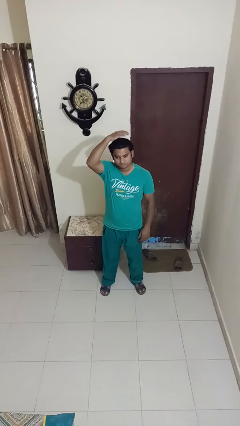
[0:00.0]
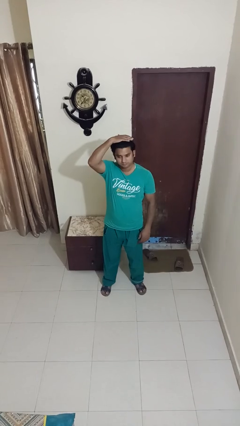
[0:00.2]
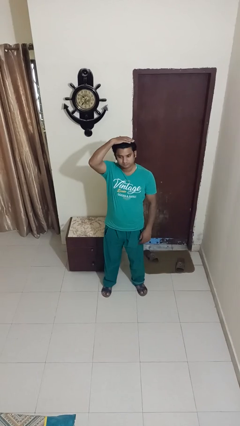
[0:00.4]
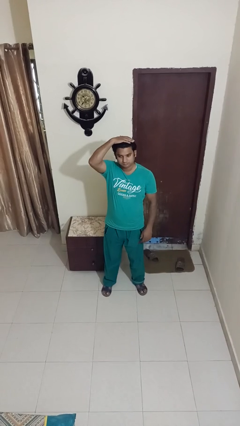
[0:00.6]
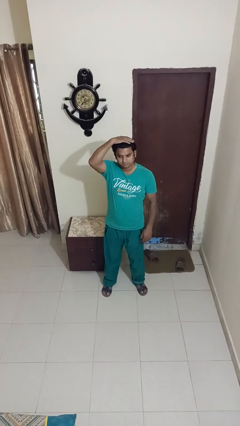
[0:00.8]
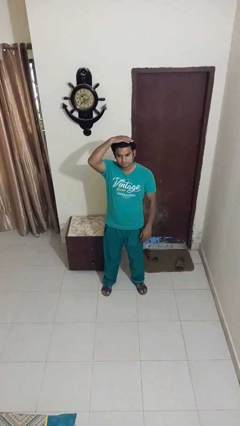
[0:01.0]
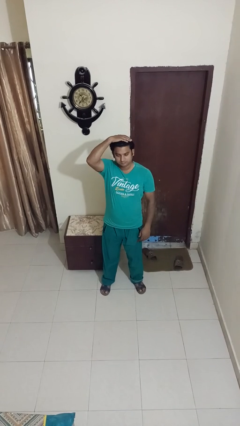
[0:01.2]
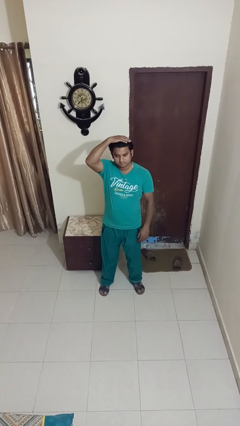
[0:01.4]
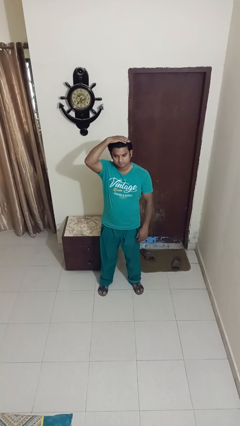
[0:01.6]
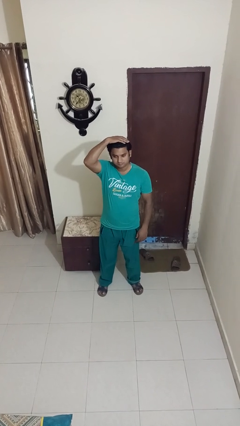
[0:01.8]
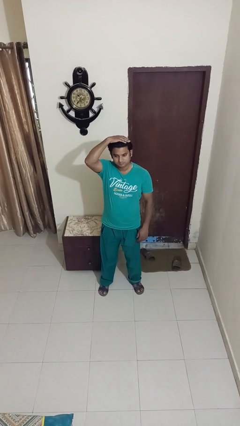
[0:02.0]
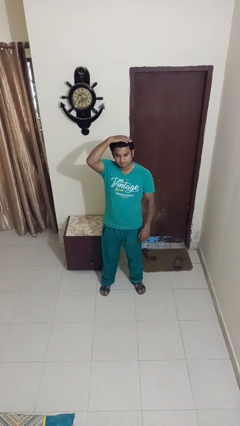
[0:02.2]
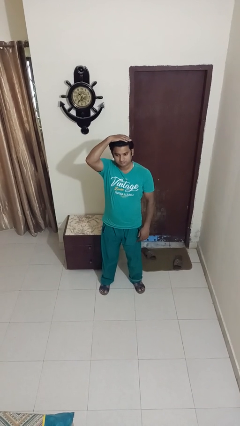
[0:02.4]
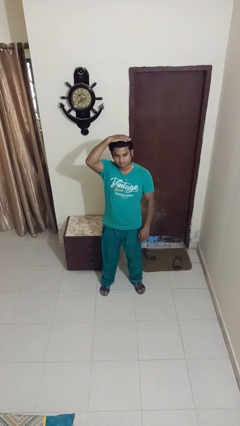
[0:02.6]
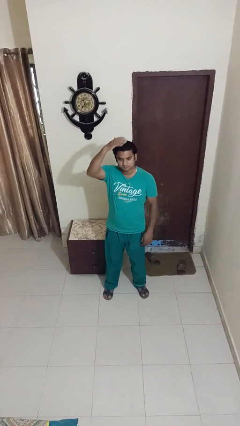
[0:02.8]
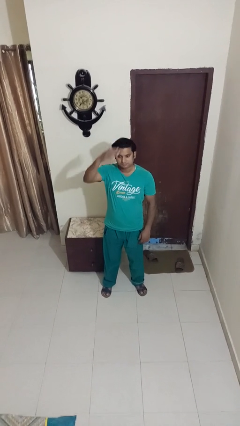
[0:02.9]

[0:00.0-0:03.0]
person pats head

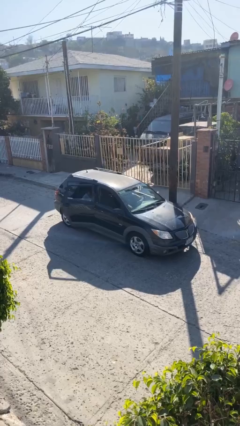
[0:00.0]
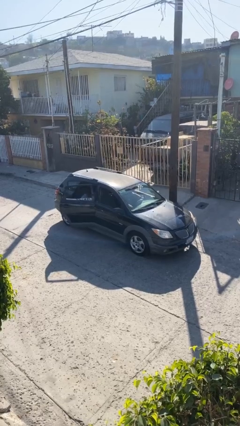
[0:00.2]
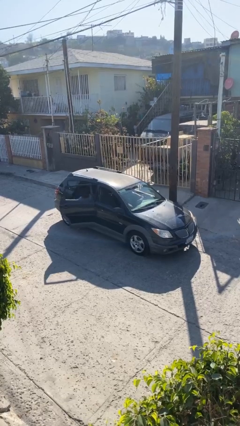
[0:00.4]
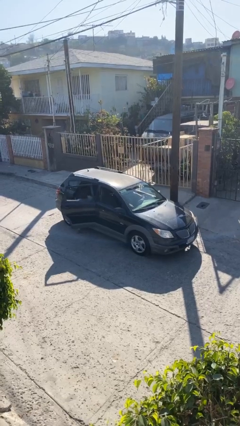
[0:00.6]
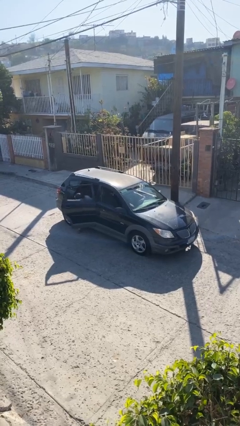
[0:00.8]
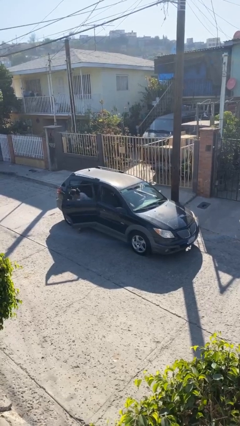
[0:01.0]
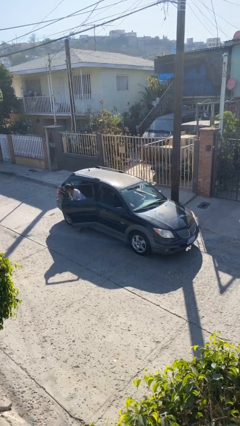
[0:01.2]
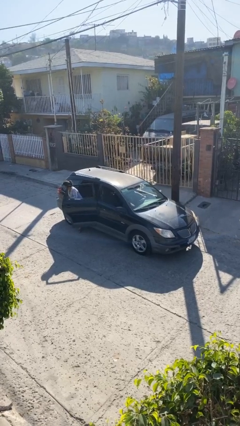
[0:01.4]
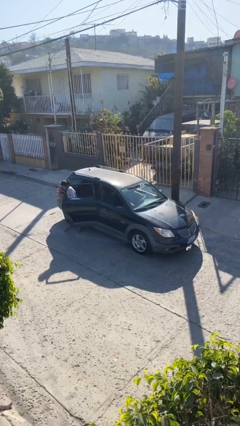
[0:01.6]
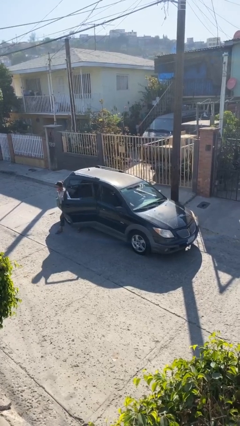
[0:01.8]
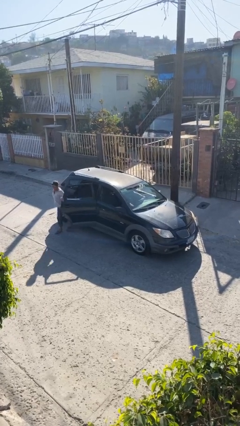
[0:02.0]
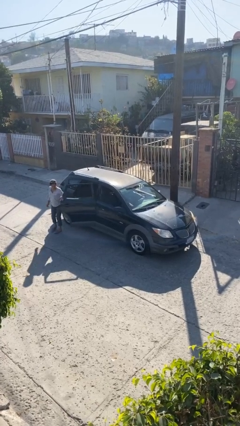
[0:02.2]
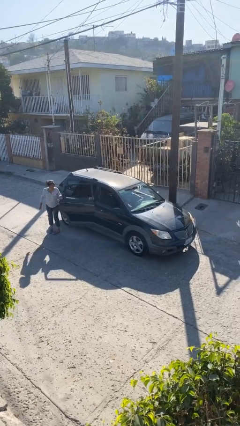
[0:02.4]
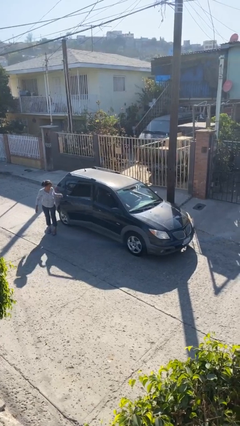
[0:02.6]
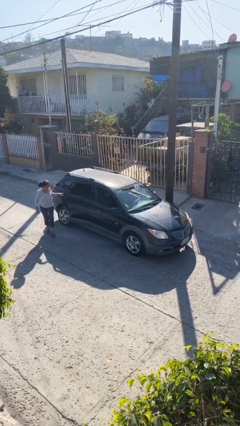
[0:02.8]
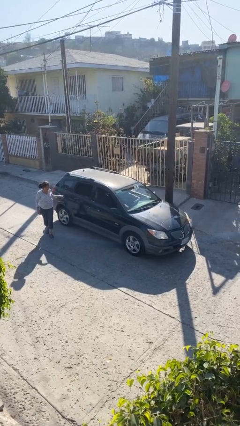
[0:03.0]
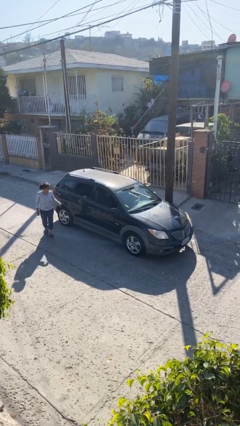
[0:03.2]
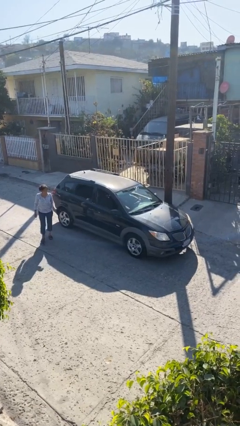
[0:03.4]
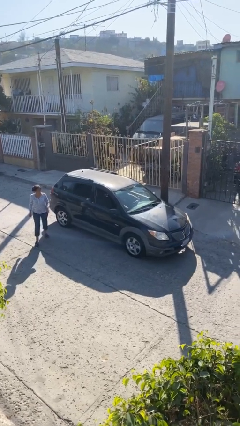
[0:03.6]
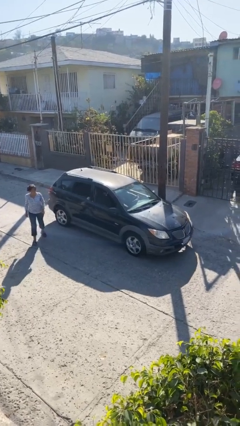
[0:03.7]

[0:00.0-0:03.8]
car drops off person

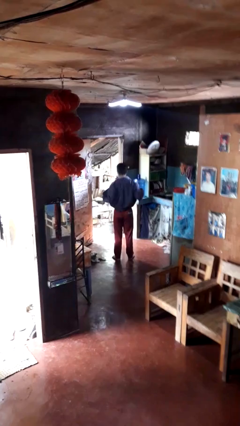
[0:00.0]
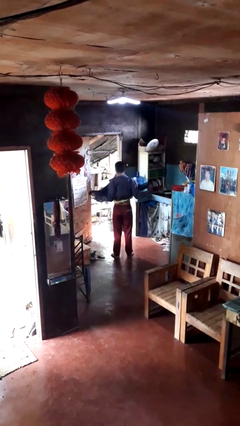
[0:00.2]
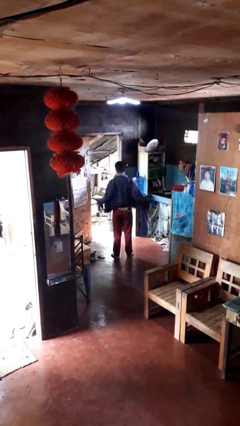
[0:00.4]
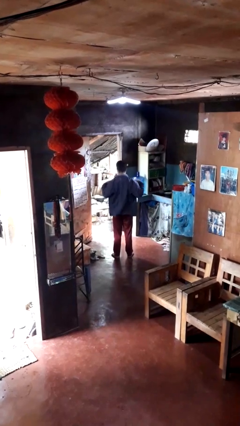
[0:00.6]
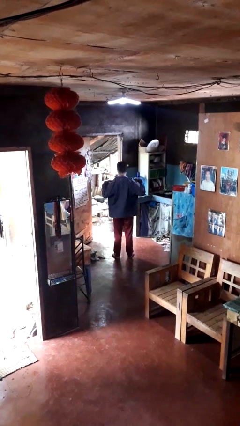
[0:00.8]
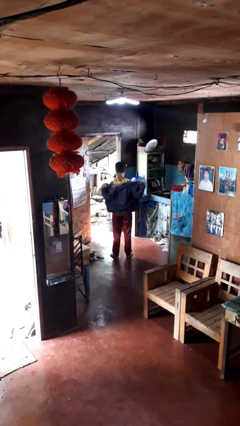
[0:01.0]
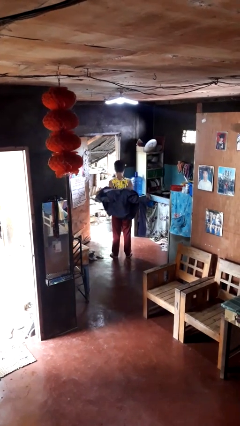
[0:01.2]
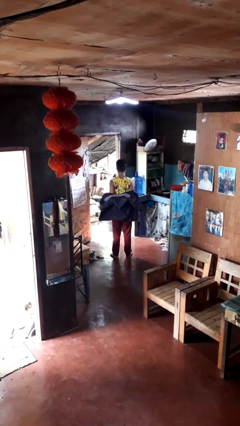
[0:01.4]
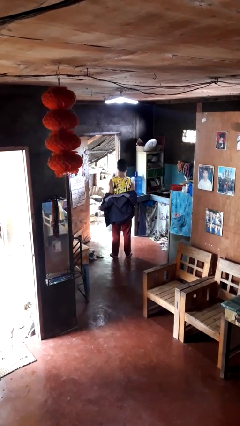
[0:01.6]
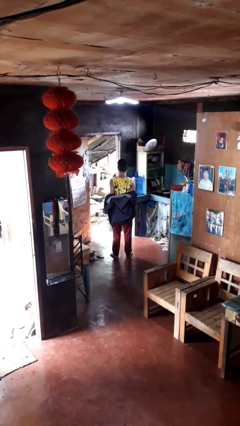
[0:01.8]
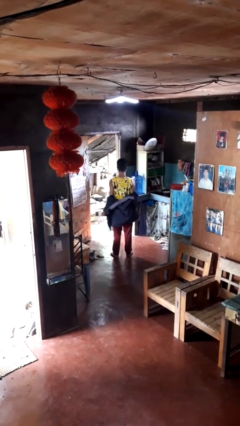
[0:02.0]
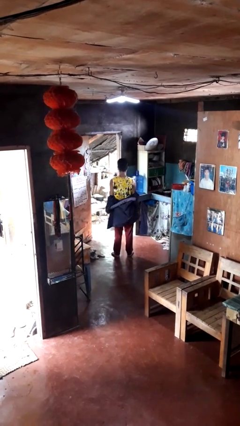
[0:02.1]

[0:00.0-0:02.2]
person takes off jacket

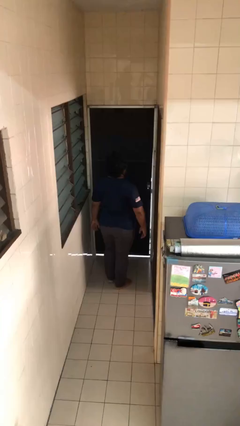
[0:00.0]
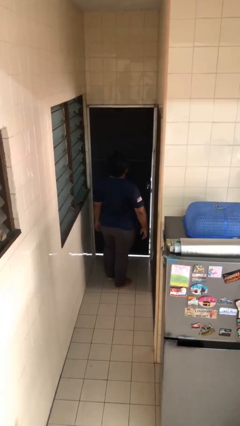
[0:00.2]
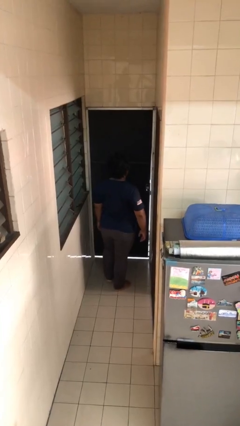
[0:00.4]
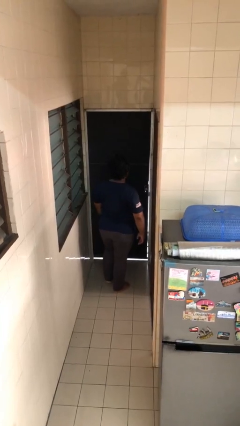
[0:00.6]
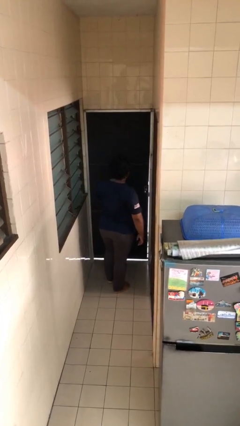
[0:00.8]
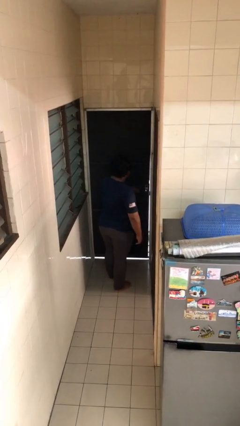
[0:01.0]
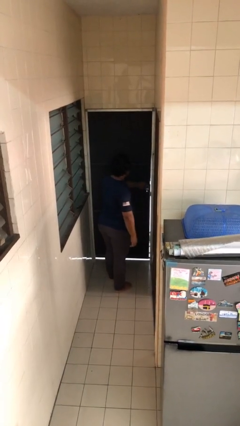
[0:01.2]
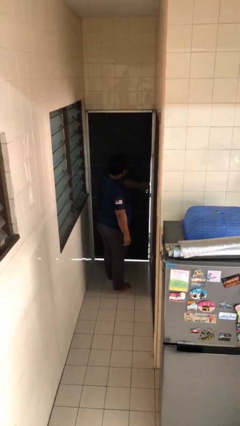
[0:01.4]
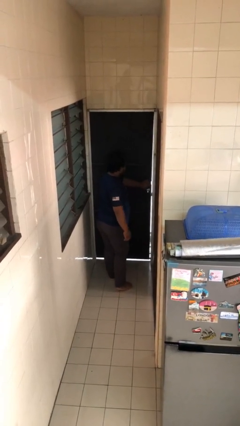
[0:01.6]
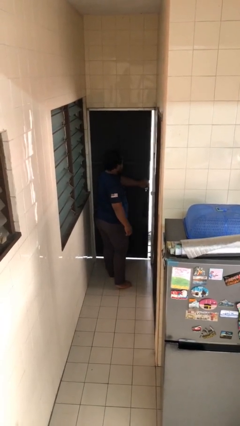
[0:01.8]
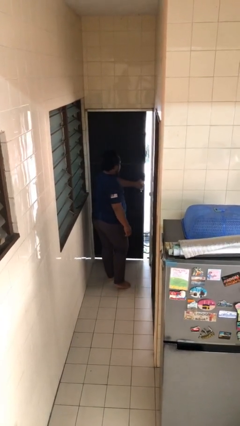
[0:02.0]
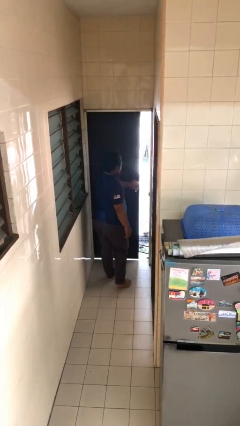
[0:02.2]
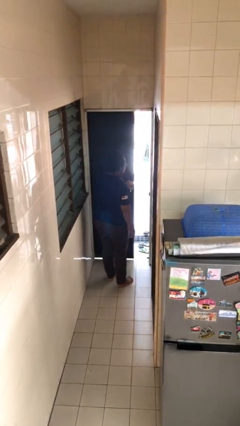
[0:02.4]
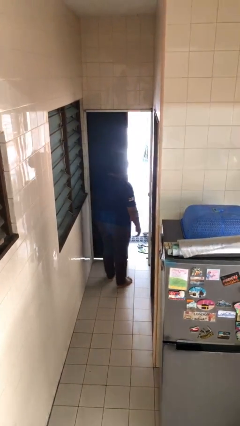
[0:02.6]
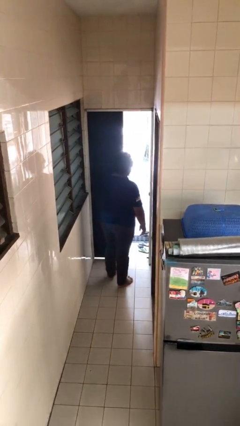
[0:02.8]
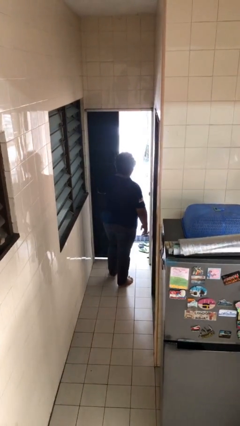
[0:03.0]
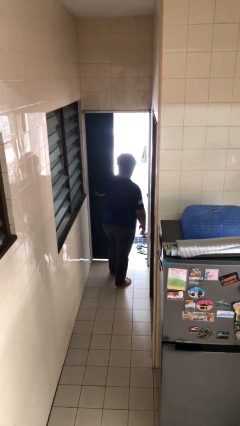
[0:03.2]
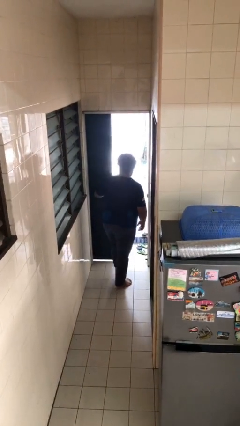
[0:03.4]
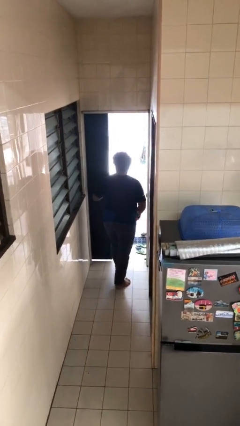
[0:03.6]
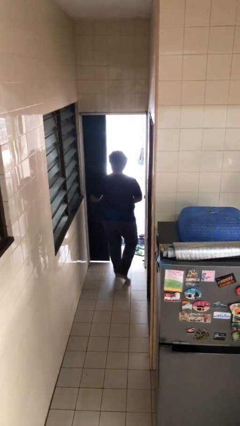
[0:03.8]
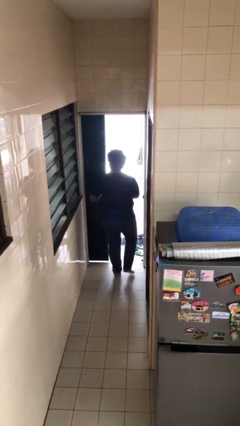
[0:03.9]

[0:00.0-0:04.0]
person opens facility door

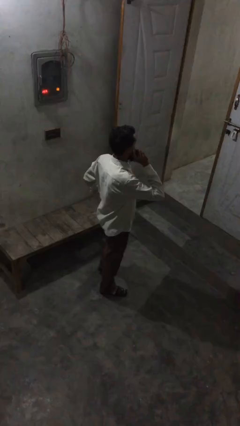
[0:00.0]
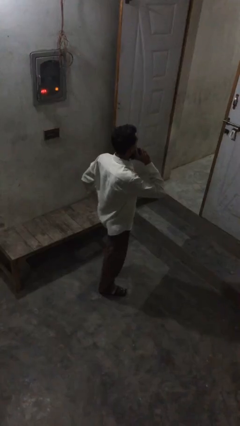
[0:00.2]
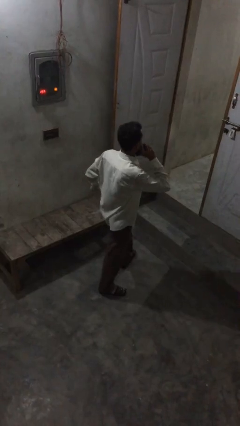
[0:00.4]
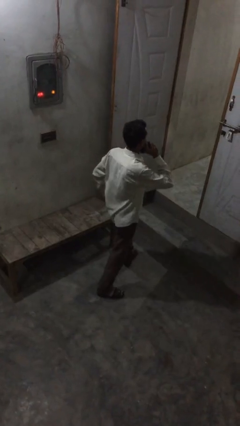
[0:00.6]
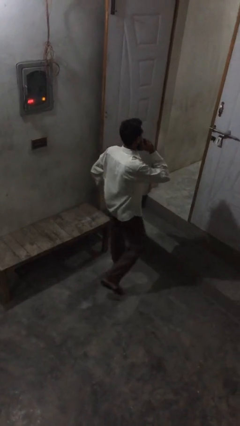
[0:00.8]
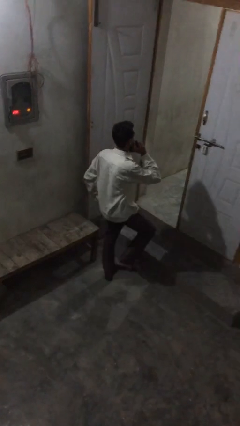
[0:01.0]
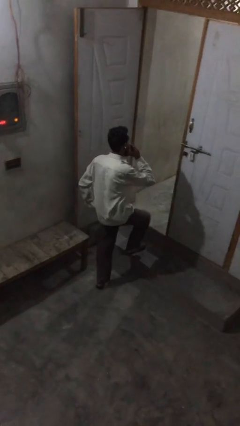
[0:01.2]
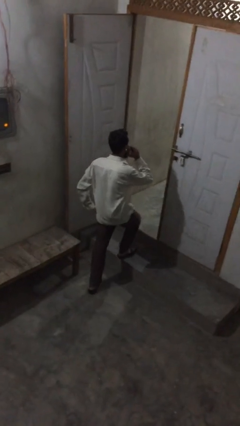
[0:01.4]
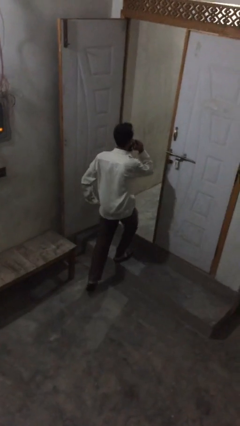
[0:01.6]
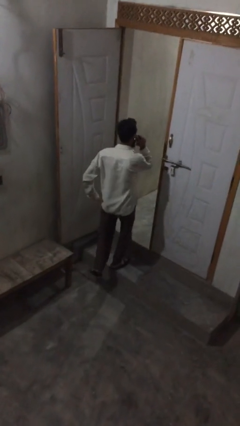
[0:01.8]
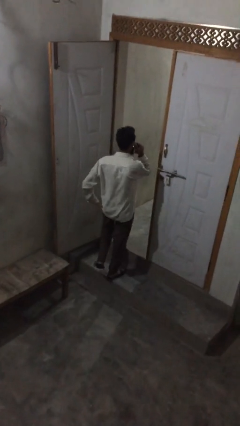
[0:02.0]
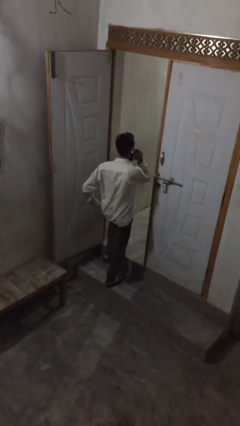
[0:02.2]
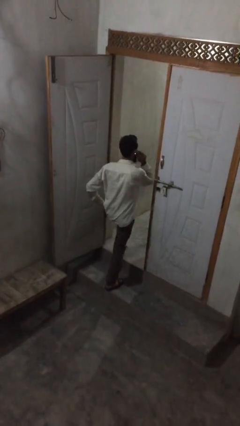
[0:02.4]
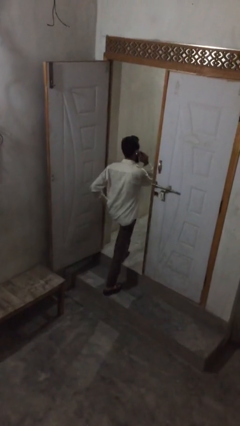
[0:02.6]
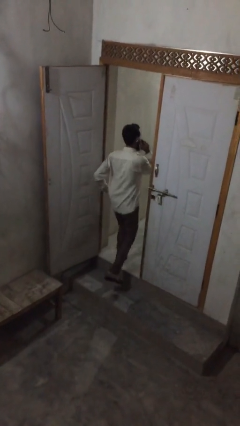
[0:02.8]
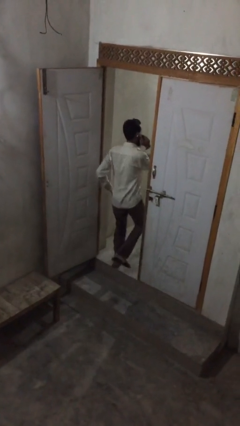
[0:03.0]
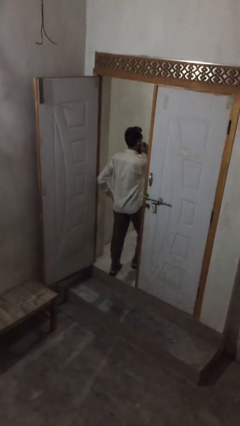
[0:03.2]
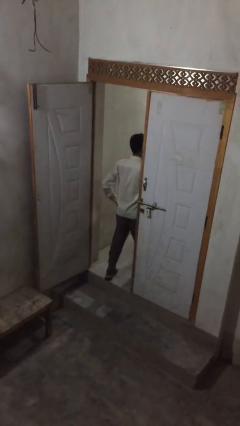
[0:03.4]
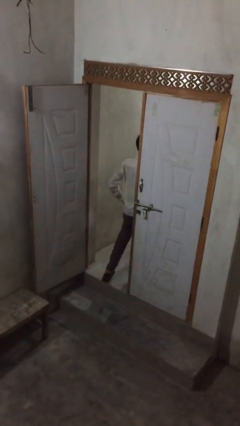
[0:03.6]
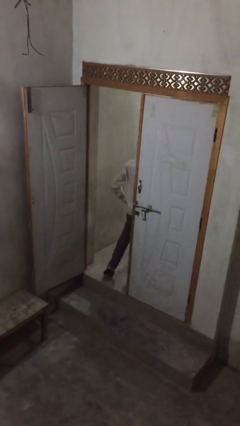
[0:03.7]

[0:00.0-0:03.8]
person exits scene through structure

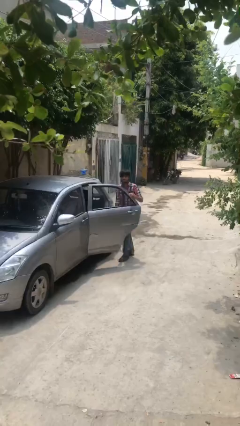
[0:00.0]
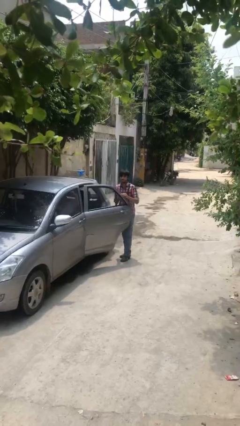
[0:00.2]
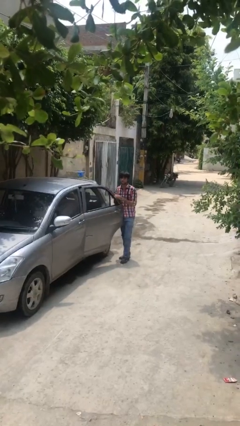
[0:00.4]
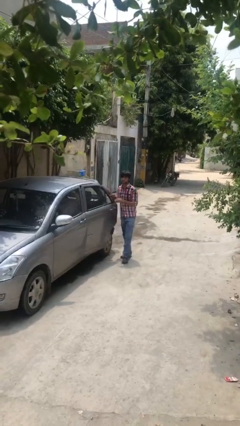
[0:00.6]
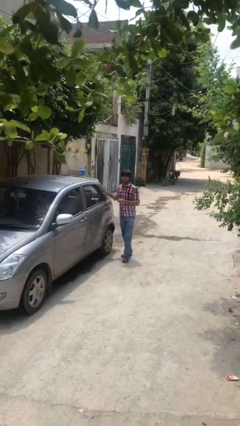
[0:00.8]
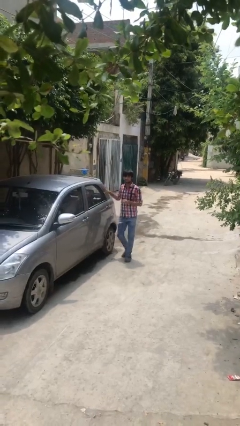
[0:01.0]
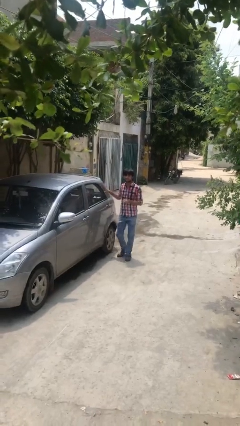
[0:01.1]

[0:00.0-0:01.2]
person closes car door
